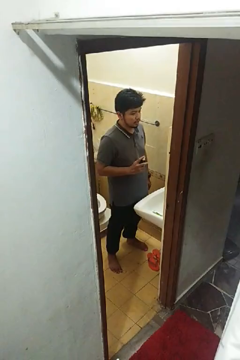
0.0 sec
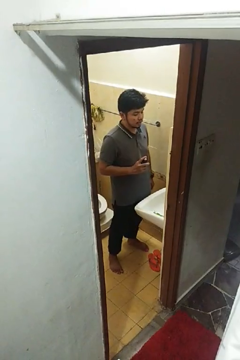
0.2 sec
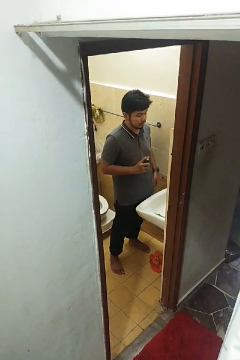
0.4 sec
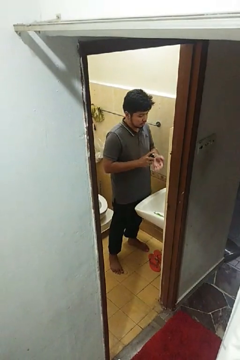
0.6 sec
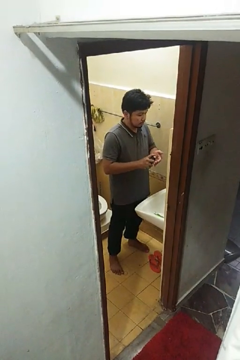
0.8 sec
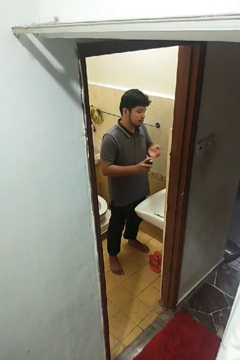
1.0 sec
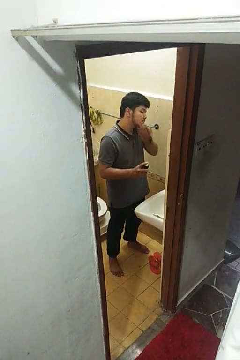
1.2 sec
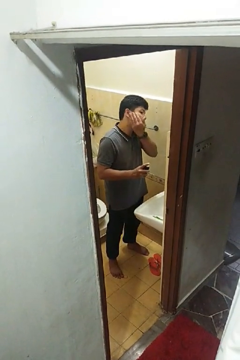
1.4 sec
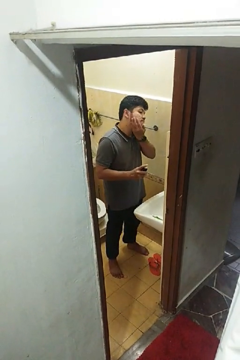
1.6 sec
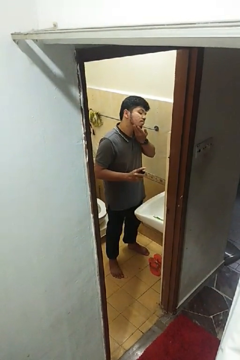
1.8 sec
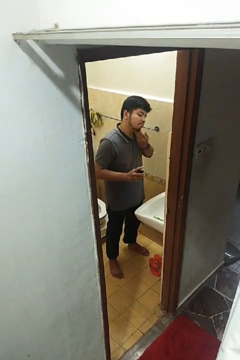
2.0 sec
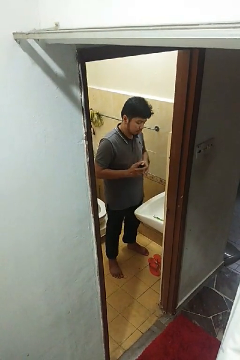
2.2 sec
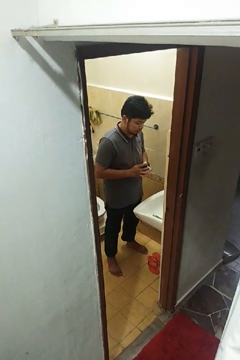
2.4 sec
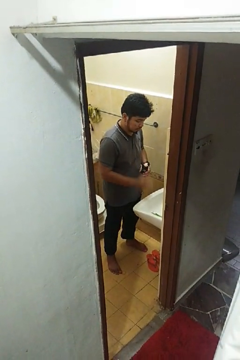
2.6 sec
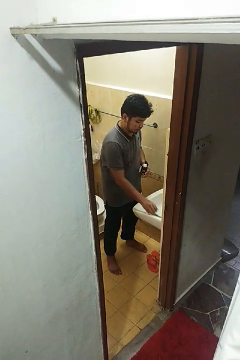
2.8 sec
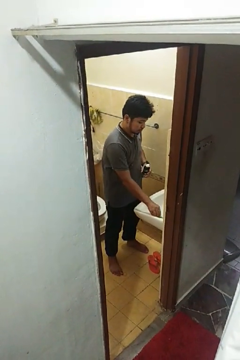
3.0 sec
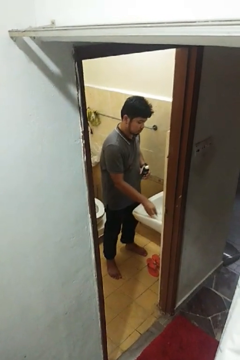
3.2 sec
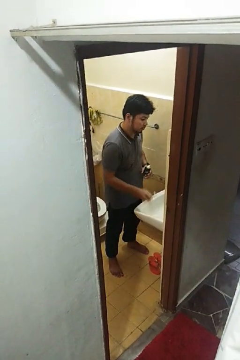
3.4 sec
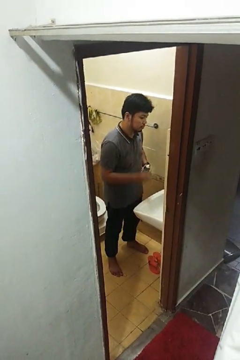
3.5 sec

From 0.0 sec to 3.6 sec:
person applies shaving cream

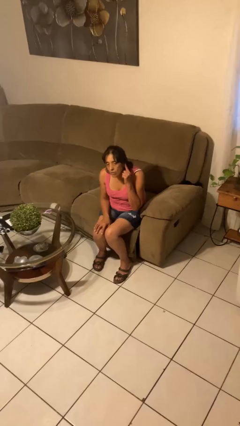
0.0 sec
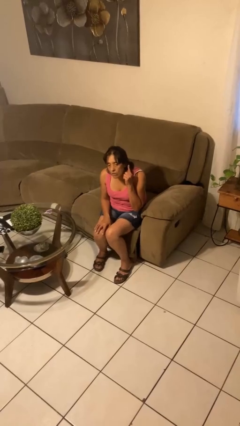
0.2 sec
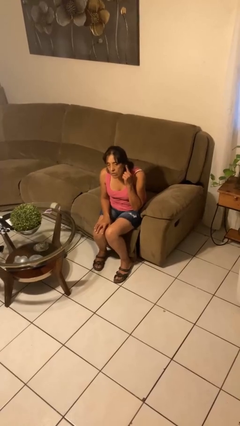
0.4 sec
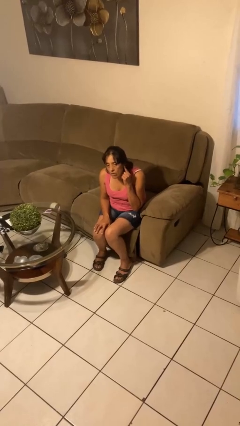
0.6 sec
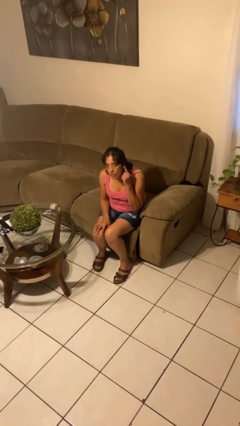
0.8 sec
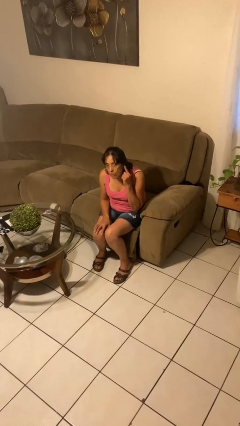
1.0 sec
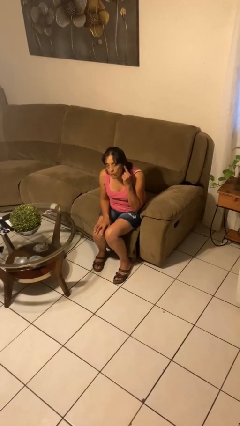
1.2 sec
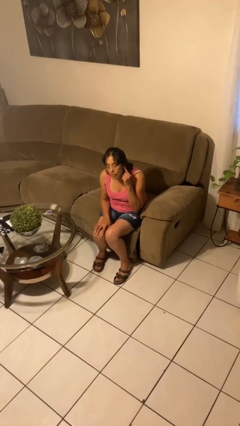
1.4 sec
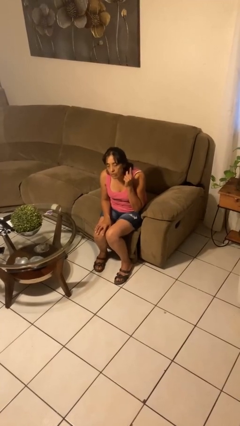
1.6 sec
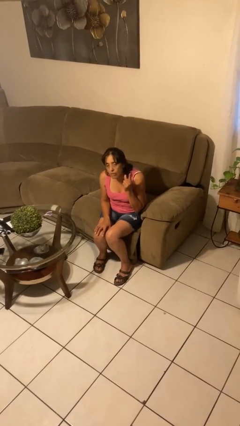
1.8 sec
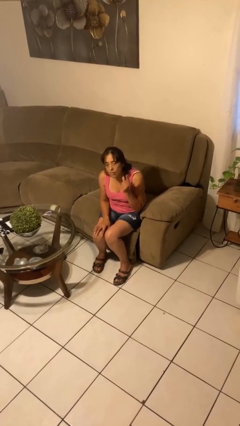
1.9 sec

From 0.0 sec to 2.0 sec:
person gestures listen closely

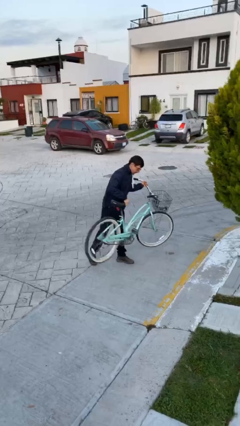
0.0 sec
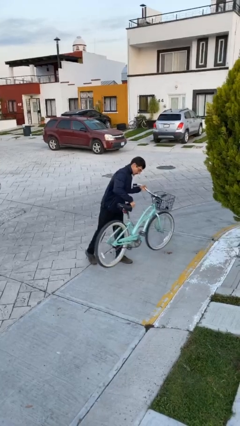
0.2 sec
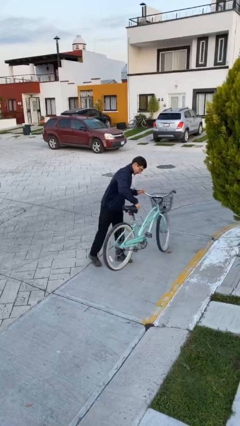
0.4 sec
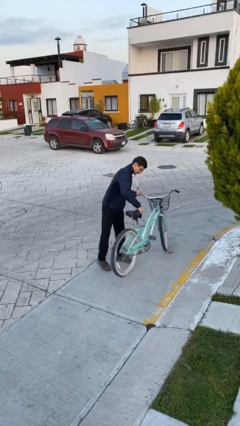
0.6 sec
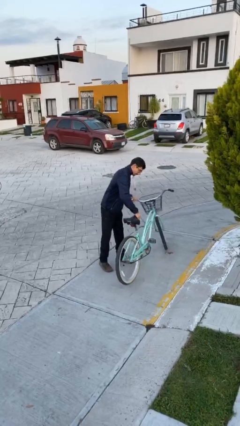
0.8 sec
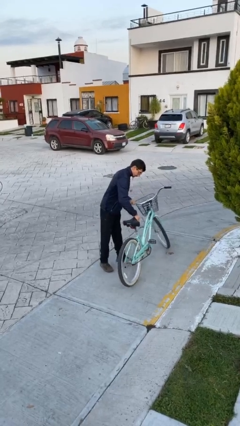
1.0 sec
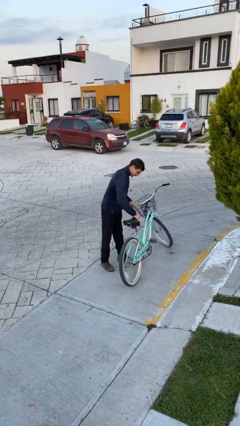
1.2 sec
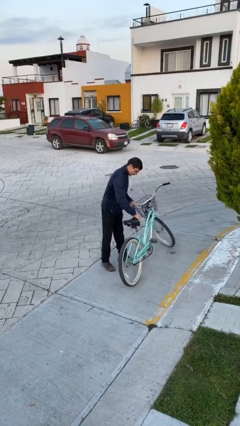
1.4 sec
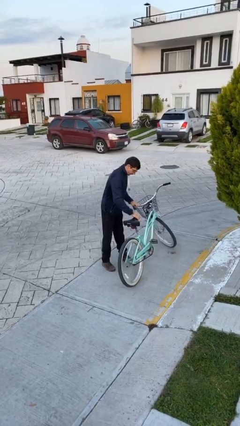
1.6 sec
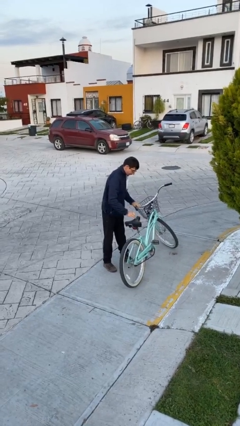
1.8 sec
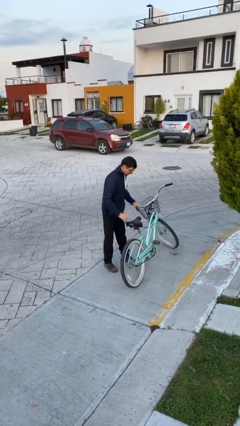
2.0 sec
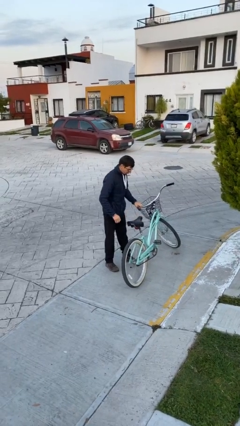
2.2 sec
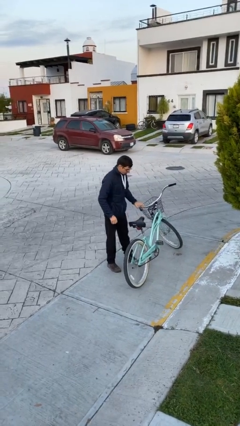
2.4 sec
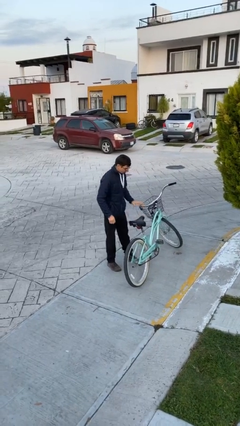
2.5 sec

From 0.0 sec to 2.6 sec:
person puts down object on floor

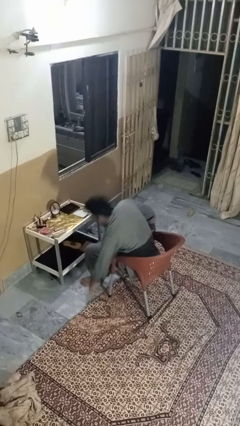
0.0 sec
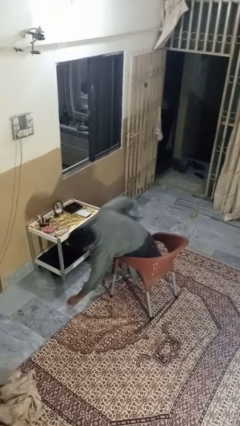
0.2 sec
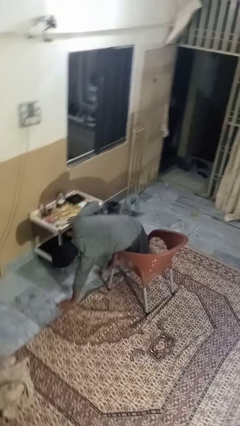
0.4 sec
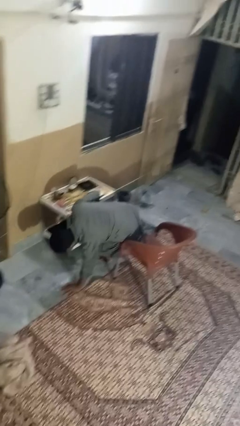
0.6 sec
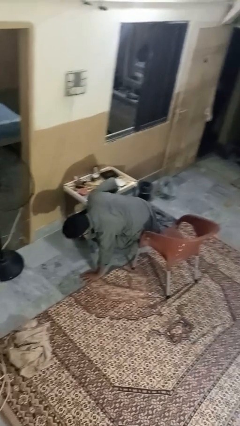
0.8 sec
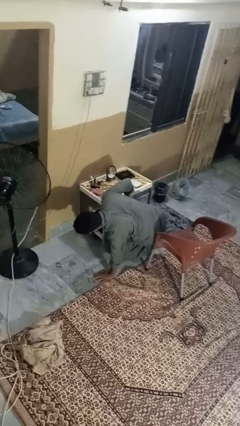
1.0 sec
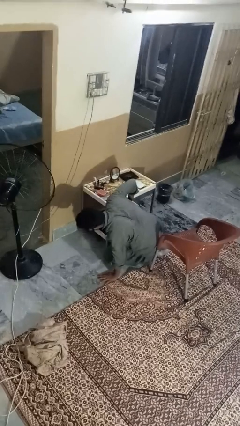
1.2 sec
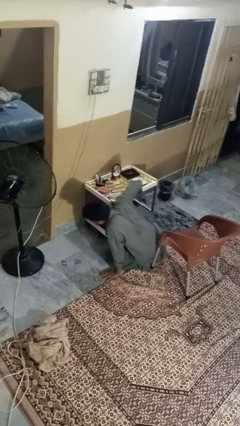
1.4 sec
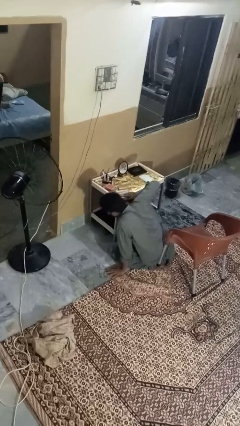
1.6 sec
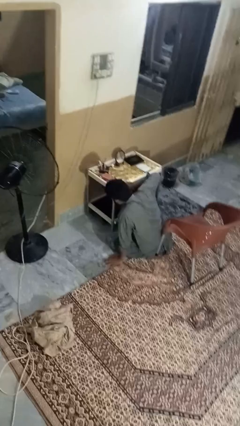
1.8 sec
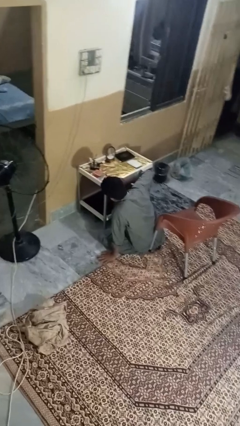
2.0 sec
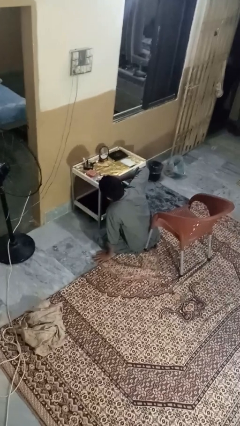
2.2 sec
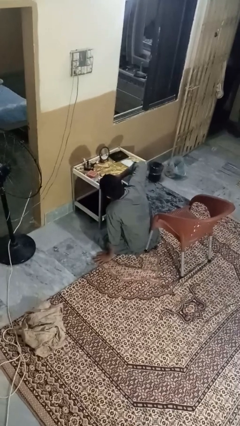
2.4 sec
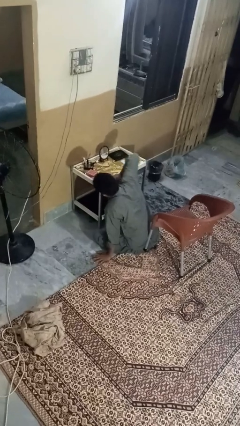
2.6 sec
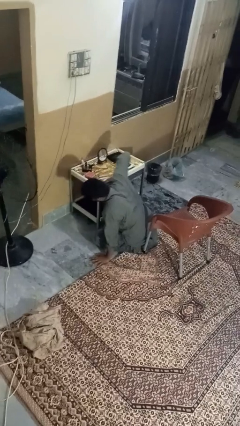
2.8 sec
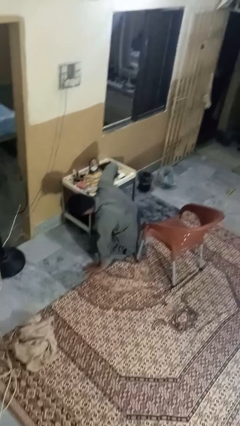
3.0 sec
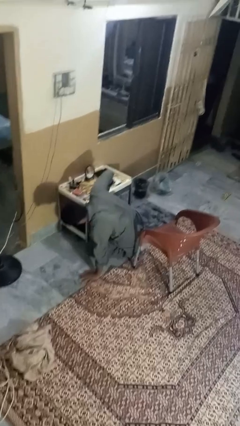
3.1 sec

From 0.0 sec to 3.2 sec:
person falls from chair

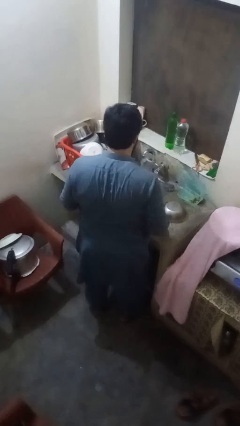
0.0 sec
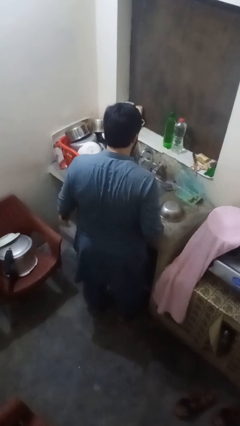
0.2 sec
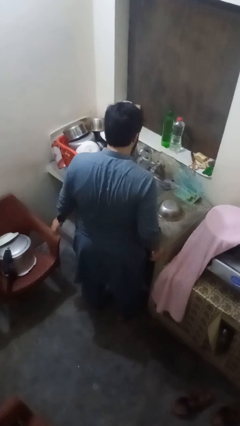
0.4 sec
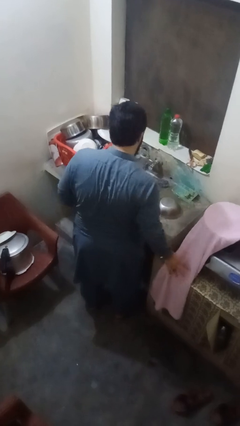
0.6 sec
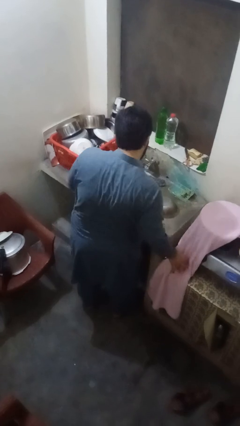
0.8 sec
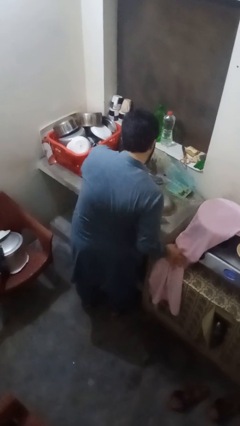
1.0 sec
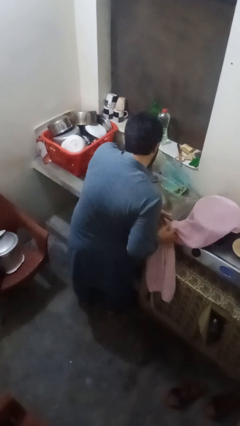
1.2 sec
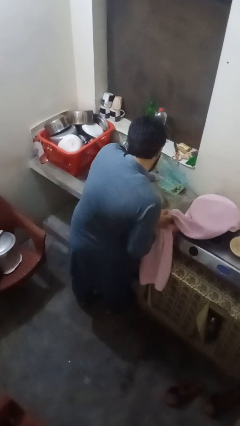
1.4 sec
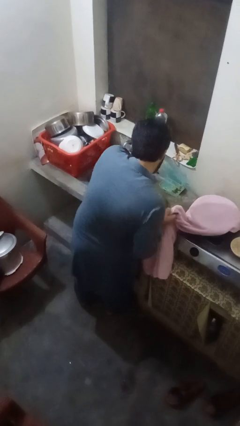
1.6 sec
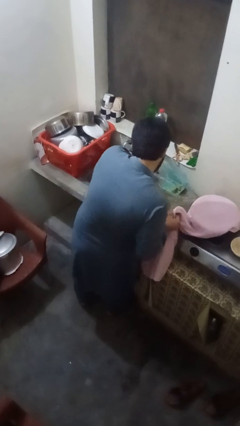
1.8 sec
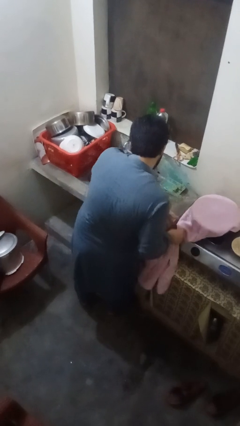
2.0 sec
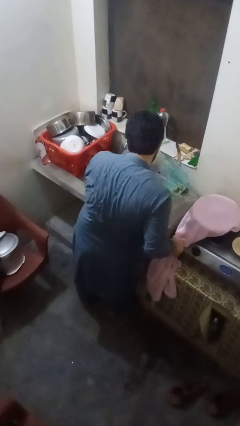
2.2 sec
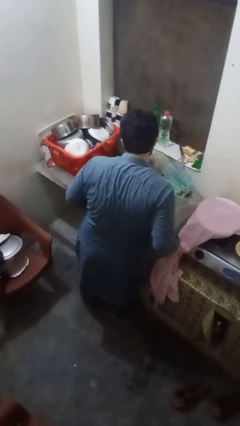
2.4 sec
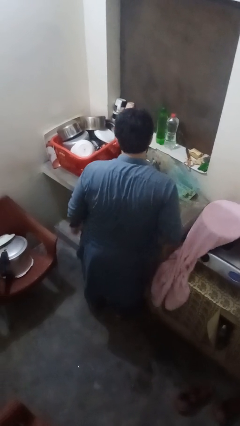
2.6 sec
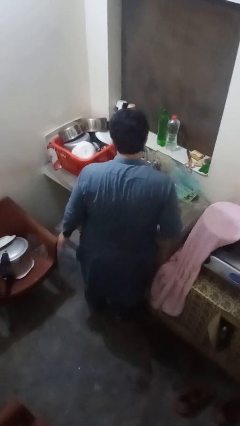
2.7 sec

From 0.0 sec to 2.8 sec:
person dries hands with towel

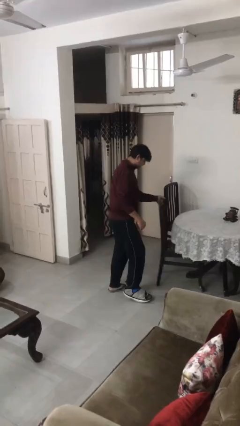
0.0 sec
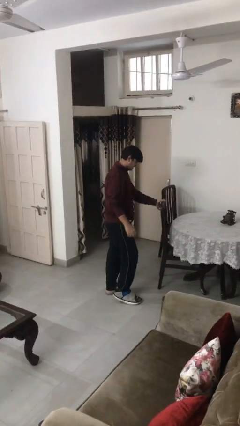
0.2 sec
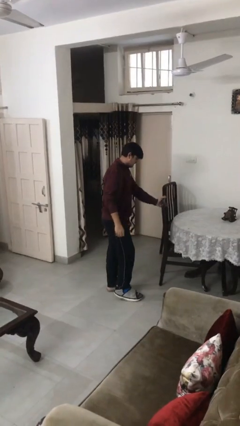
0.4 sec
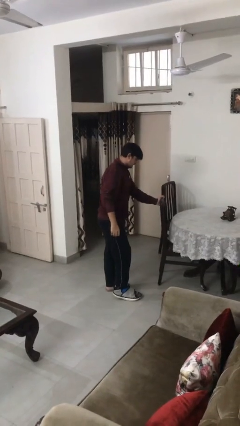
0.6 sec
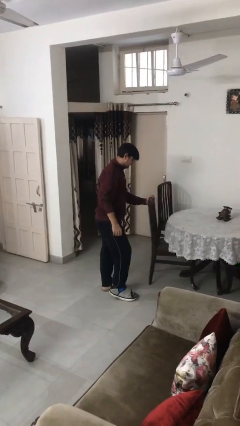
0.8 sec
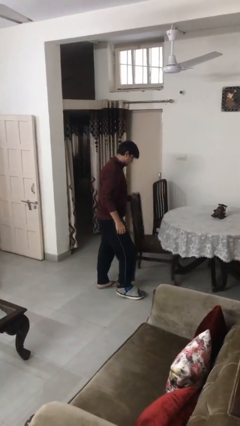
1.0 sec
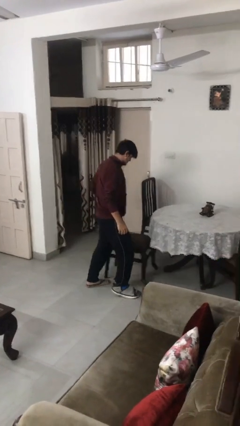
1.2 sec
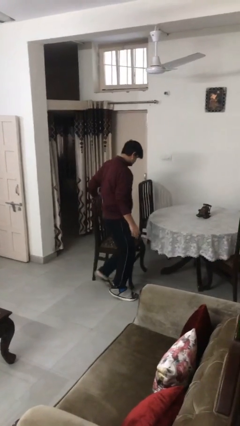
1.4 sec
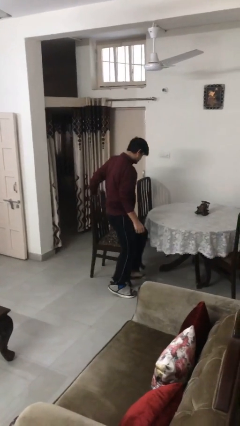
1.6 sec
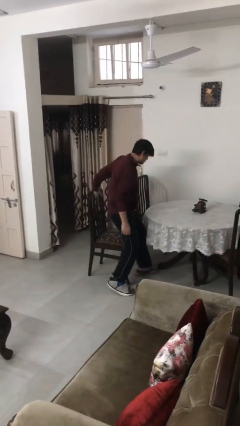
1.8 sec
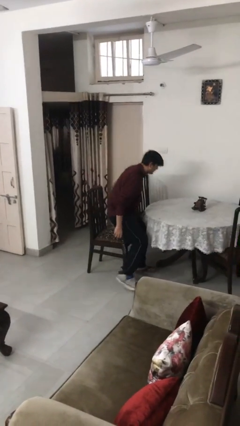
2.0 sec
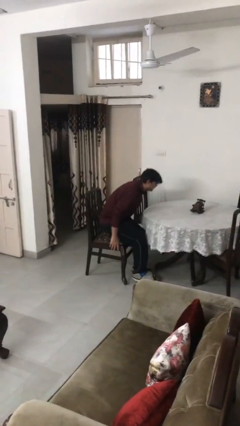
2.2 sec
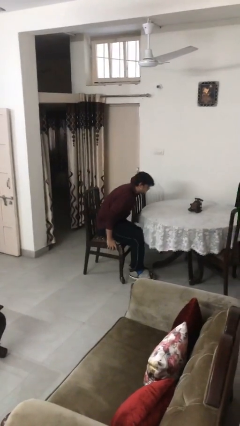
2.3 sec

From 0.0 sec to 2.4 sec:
person sits down

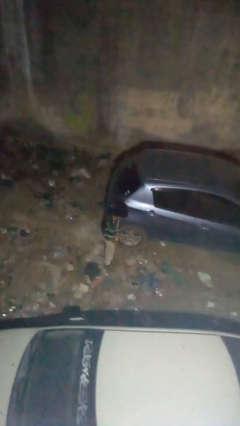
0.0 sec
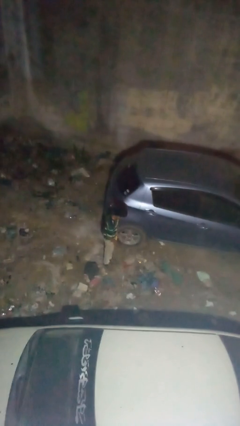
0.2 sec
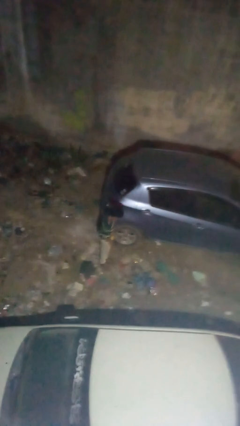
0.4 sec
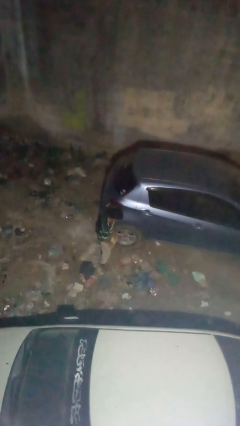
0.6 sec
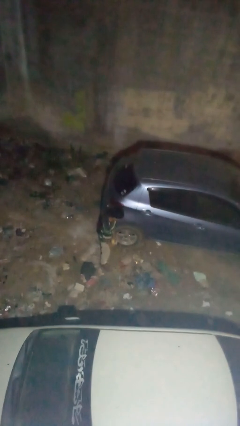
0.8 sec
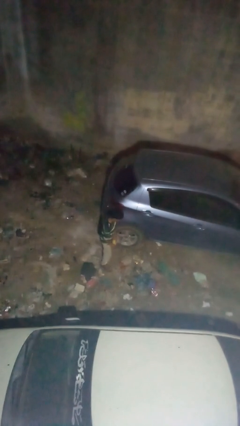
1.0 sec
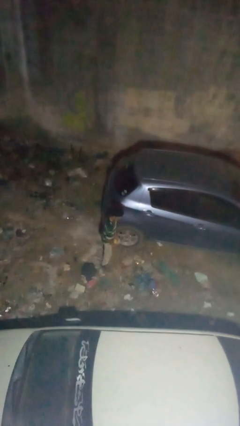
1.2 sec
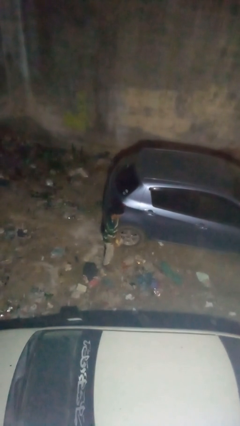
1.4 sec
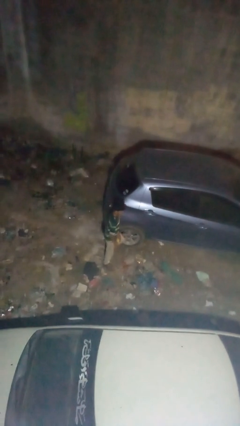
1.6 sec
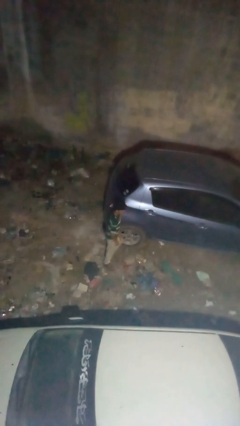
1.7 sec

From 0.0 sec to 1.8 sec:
person kicks car tires
